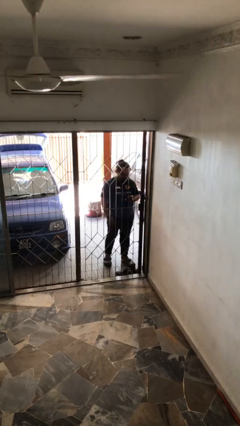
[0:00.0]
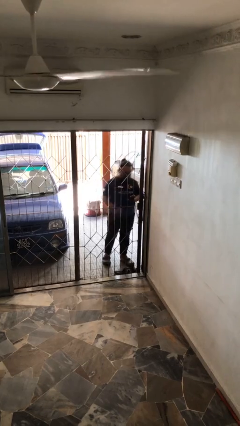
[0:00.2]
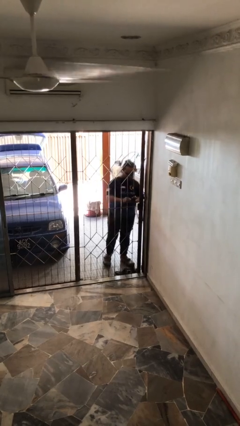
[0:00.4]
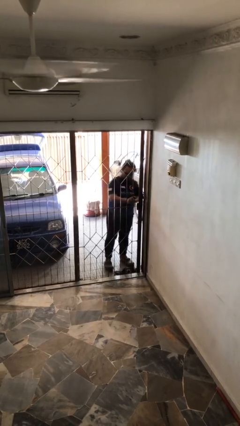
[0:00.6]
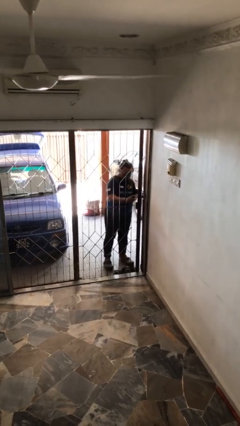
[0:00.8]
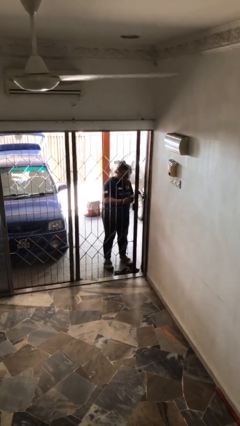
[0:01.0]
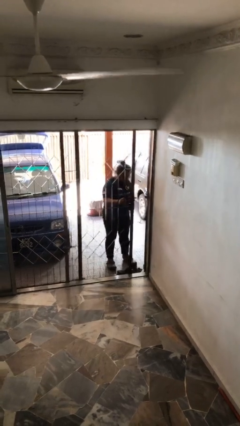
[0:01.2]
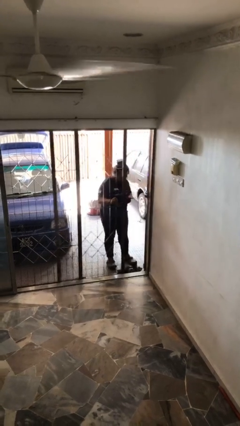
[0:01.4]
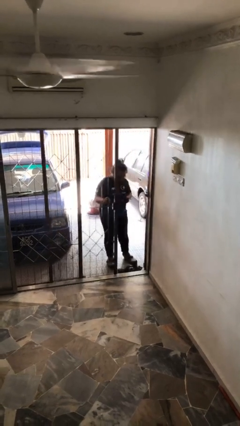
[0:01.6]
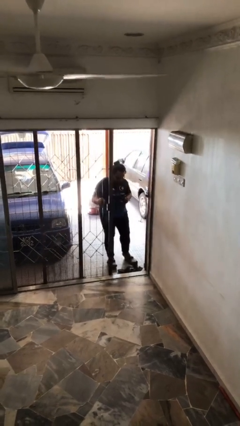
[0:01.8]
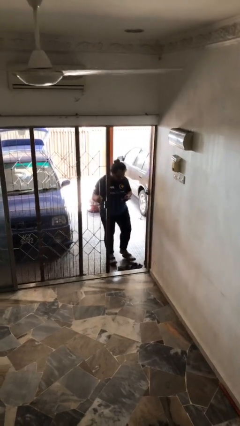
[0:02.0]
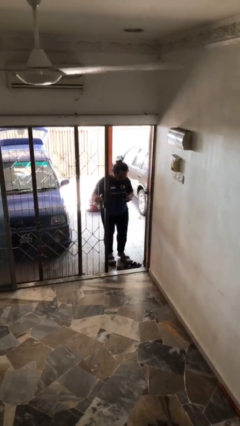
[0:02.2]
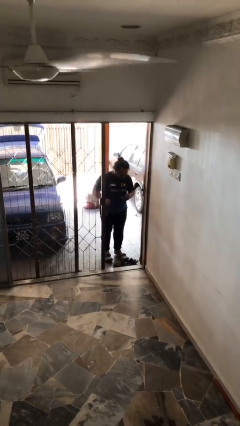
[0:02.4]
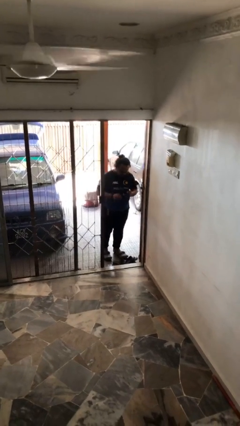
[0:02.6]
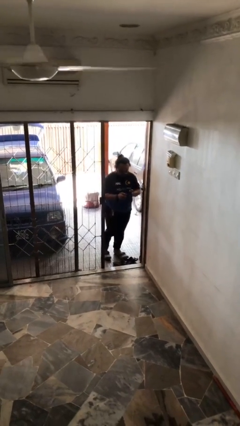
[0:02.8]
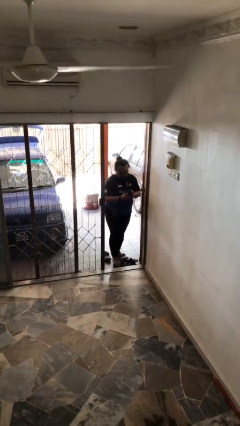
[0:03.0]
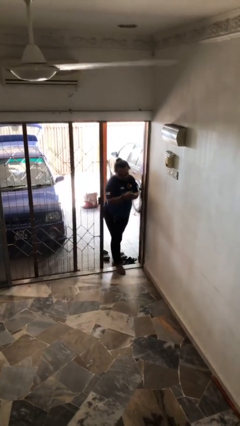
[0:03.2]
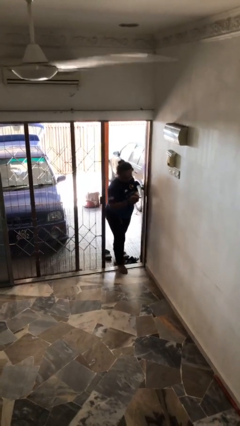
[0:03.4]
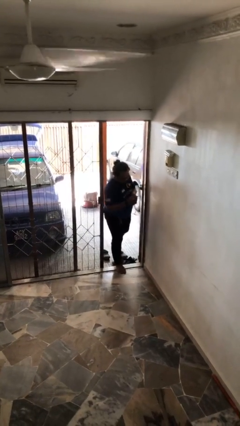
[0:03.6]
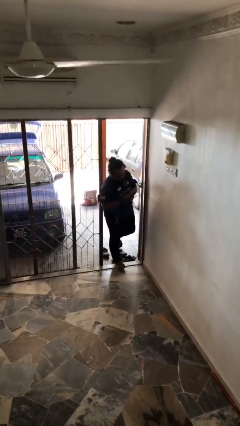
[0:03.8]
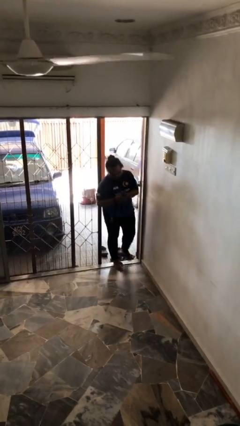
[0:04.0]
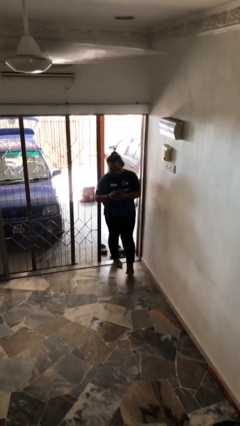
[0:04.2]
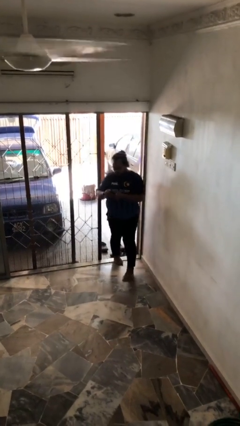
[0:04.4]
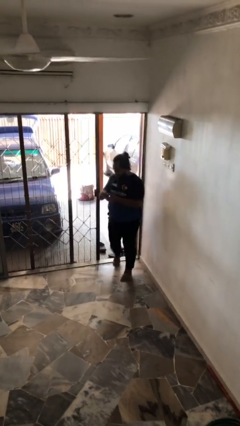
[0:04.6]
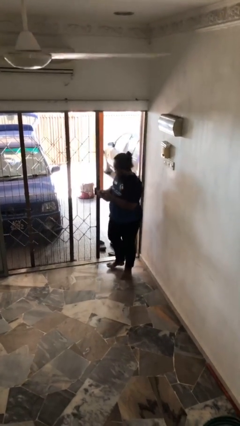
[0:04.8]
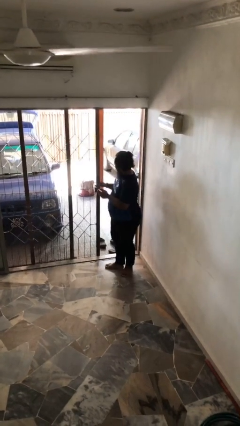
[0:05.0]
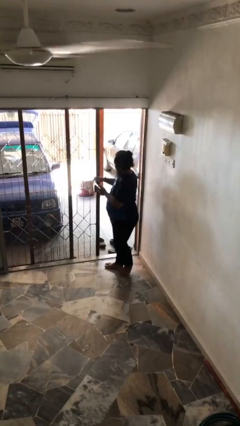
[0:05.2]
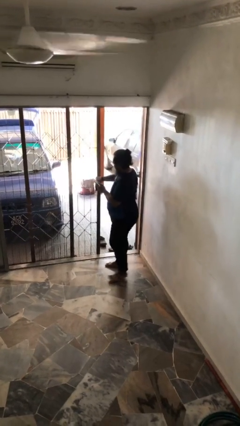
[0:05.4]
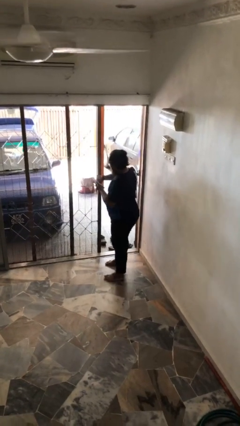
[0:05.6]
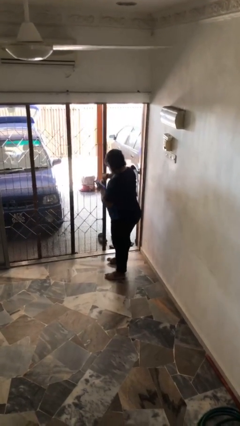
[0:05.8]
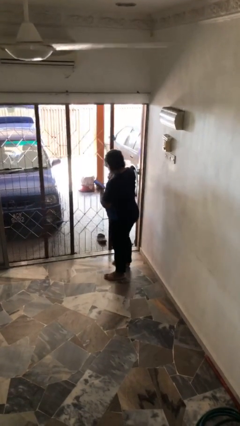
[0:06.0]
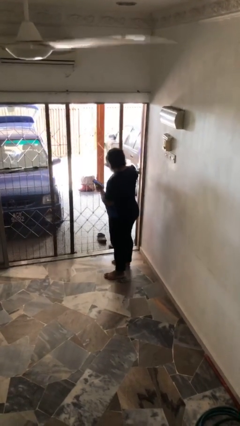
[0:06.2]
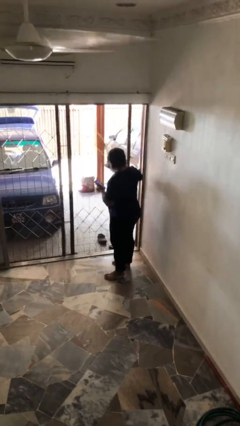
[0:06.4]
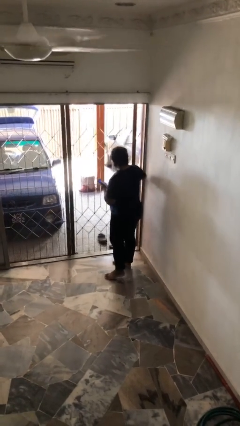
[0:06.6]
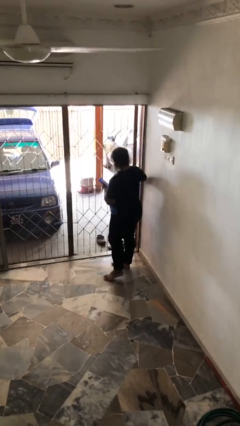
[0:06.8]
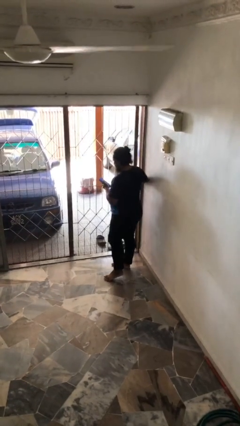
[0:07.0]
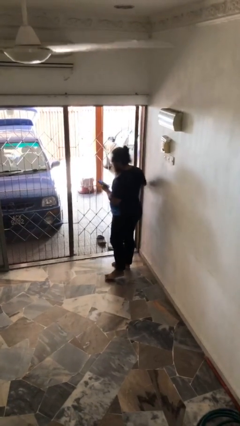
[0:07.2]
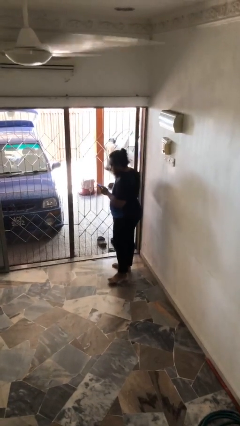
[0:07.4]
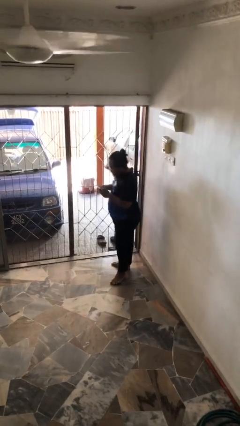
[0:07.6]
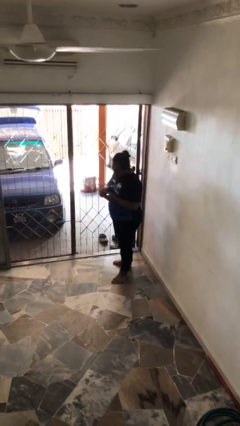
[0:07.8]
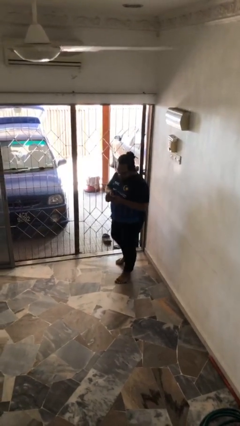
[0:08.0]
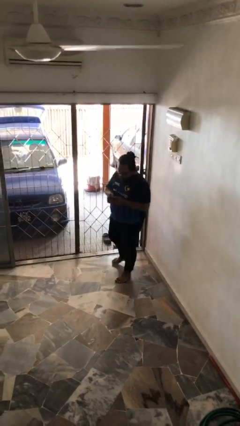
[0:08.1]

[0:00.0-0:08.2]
person texts on phone

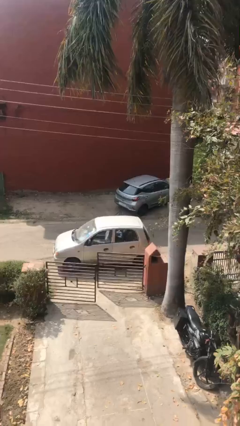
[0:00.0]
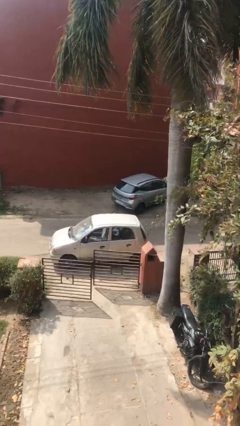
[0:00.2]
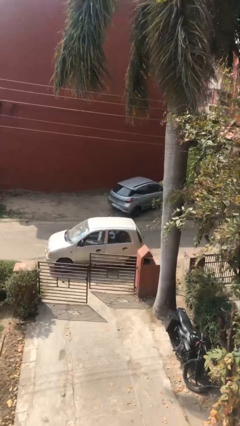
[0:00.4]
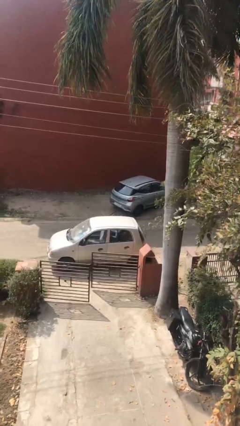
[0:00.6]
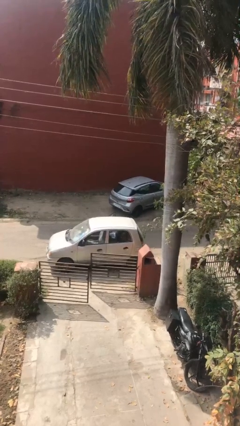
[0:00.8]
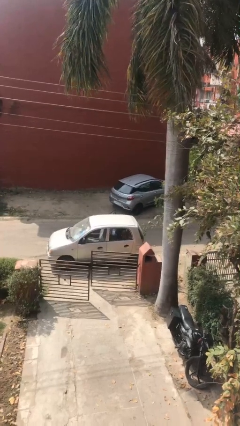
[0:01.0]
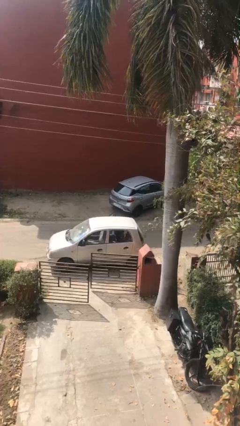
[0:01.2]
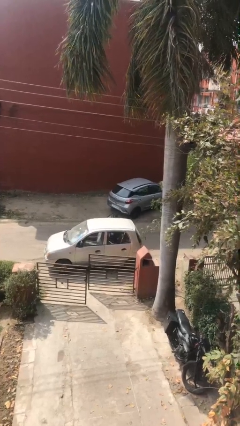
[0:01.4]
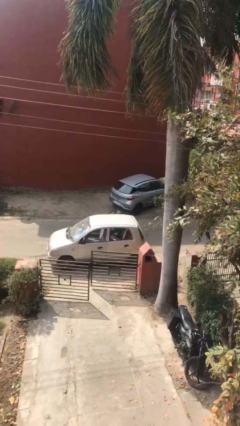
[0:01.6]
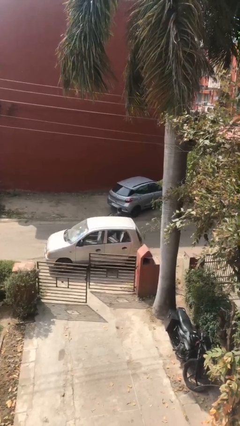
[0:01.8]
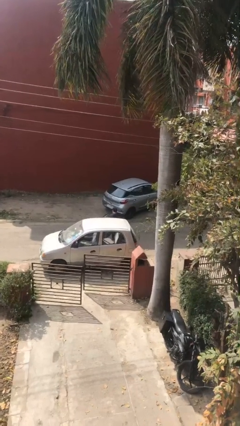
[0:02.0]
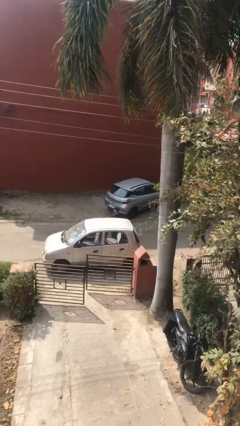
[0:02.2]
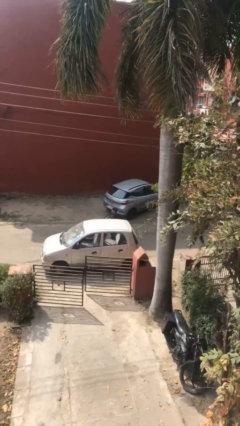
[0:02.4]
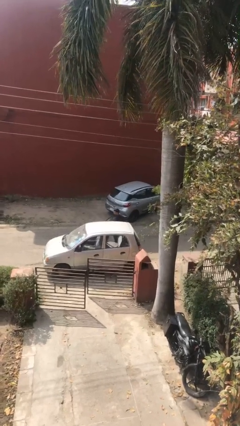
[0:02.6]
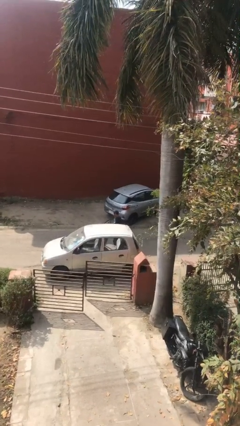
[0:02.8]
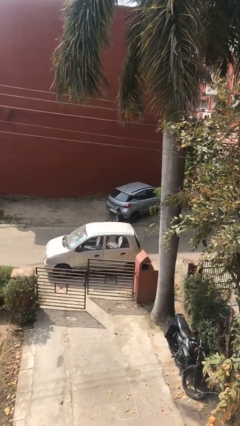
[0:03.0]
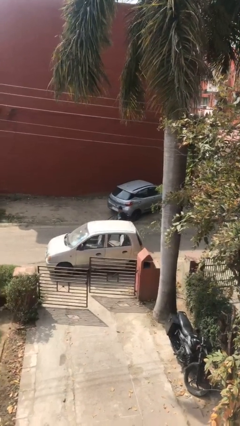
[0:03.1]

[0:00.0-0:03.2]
person exits car

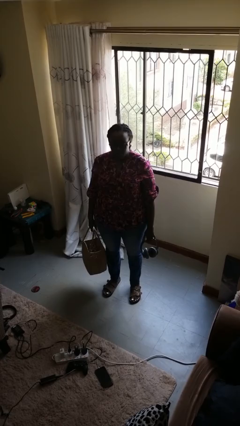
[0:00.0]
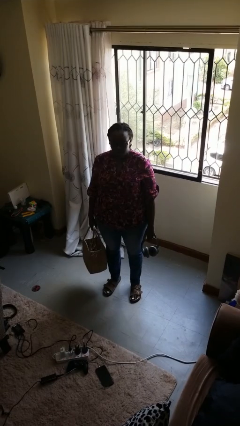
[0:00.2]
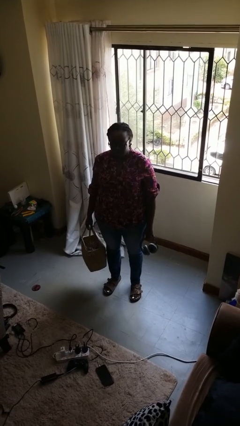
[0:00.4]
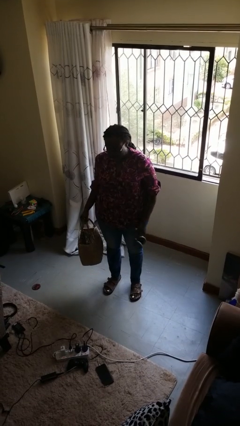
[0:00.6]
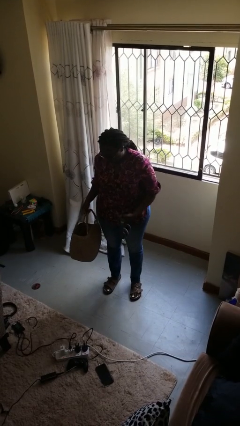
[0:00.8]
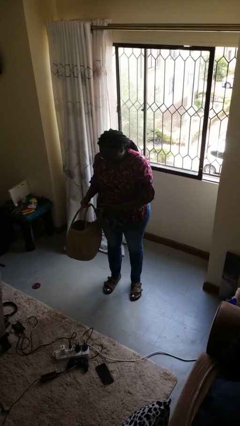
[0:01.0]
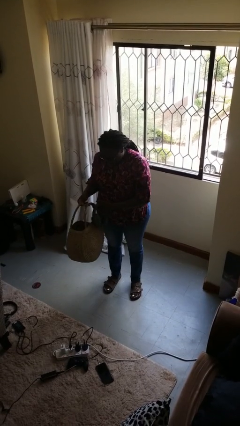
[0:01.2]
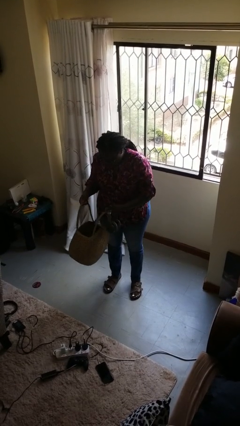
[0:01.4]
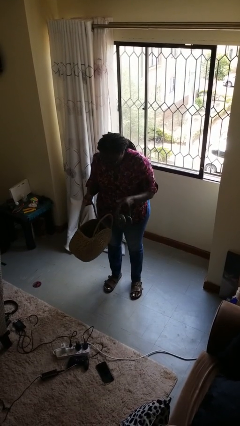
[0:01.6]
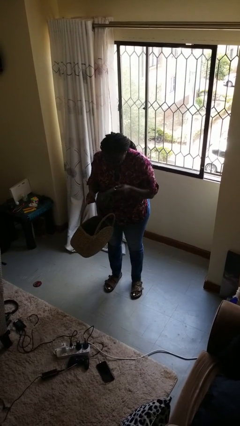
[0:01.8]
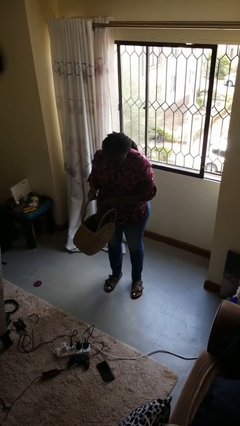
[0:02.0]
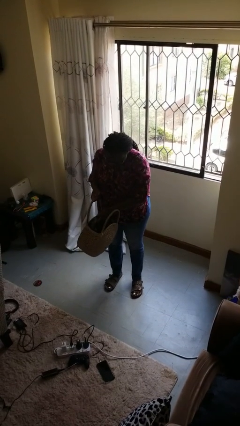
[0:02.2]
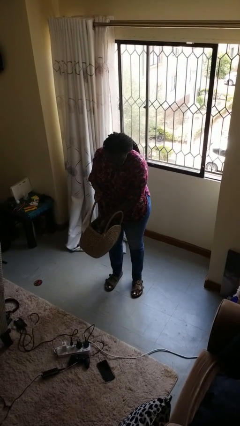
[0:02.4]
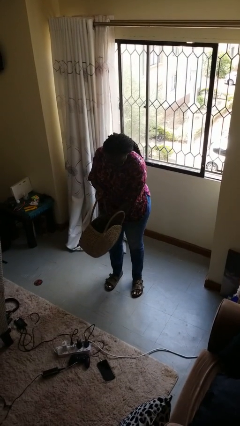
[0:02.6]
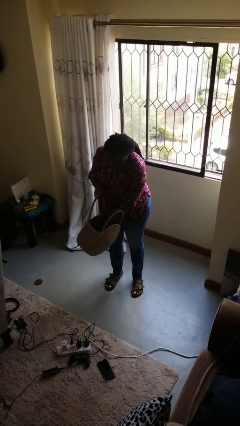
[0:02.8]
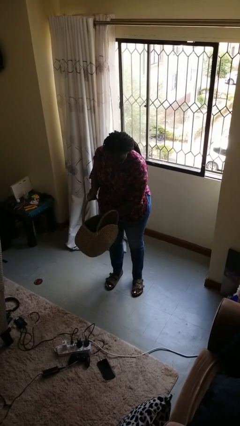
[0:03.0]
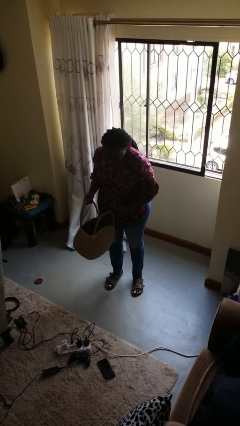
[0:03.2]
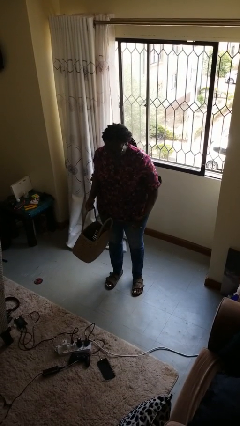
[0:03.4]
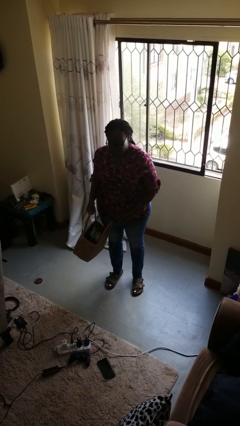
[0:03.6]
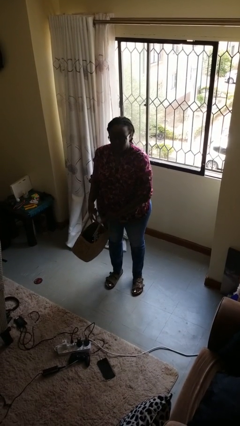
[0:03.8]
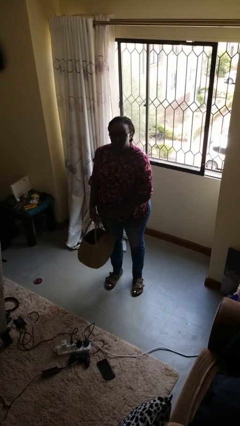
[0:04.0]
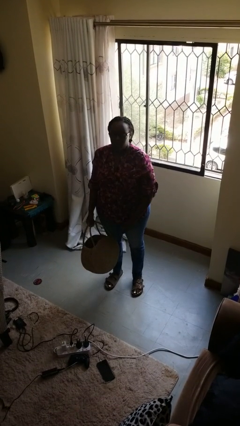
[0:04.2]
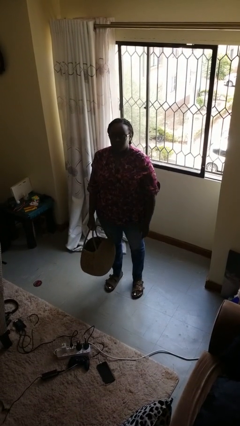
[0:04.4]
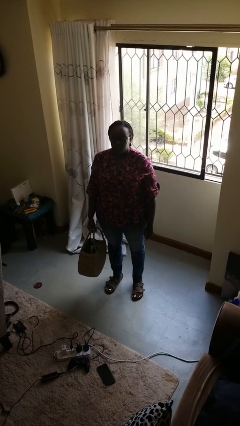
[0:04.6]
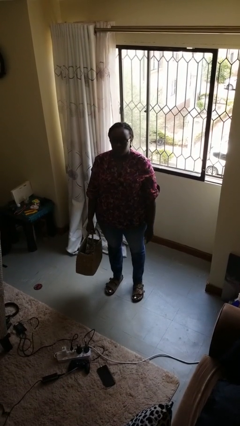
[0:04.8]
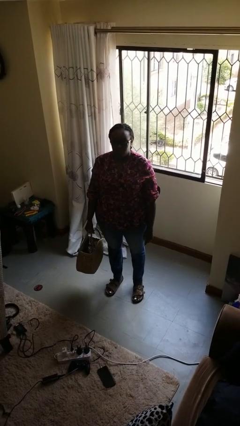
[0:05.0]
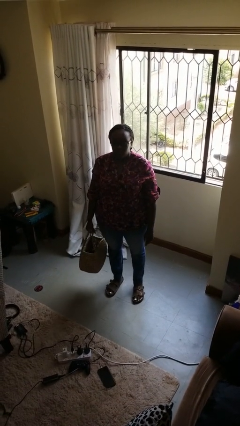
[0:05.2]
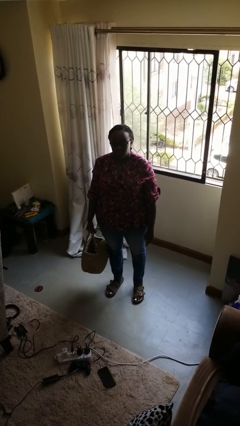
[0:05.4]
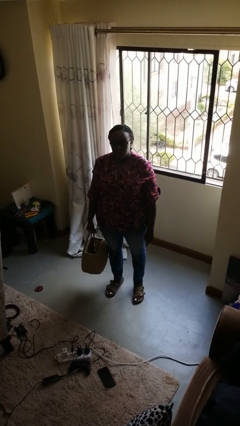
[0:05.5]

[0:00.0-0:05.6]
person puts object into basket

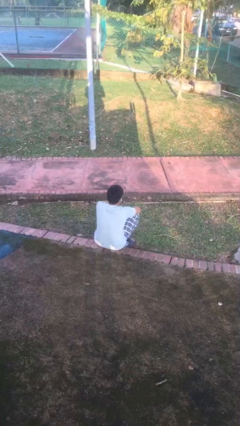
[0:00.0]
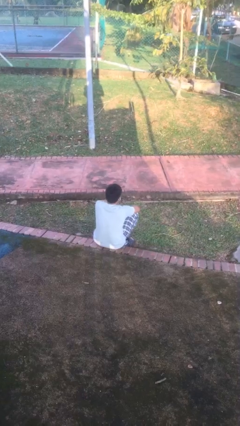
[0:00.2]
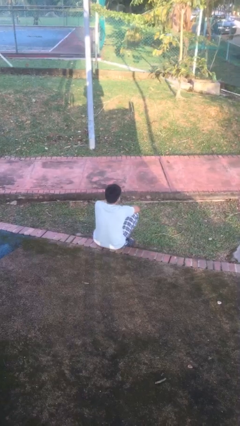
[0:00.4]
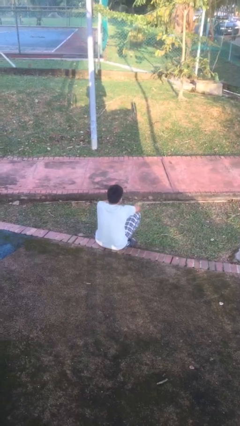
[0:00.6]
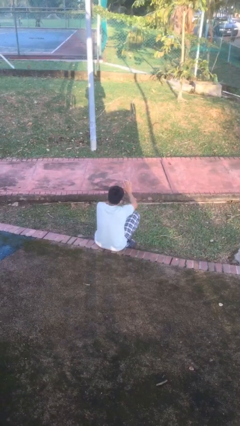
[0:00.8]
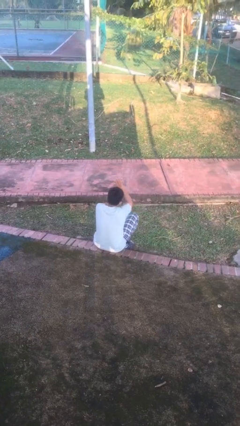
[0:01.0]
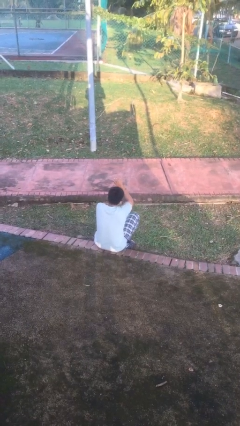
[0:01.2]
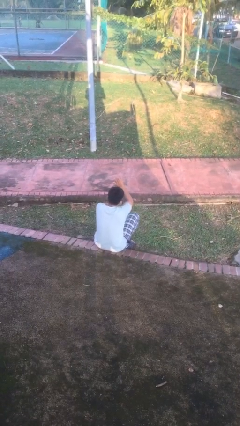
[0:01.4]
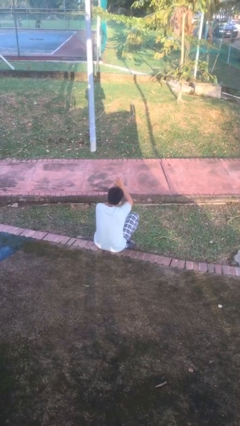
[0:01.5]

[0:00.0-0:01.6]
person gestures stop
